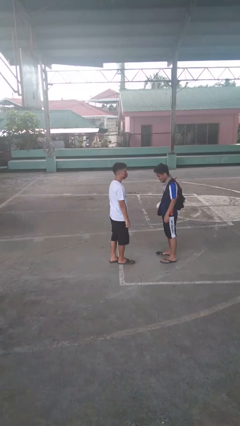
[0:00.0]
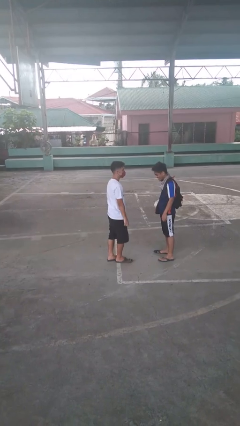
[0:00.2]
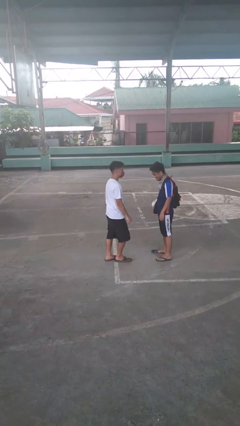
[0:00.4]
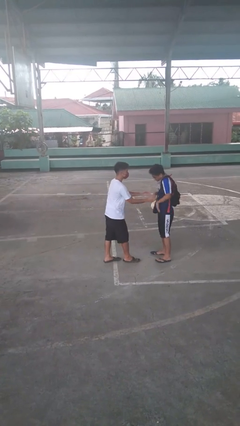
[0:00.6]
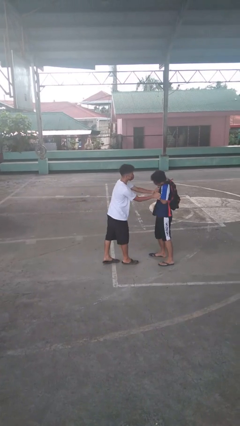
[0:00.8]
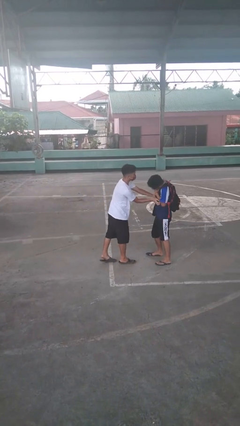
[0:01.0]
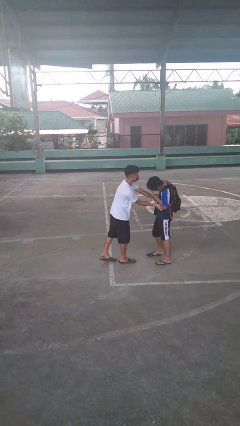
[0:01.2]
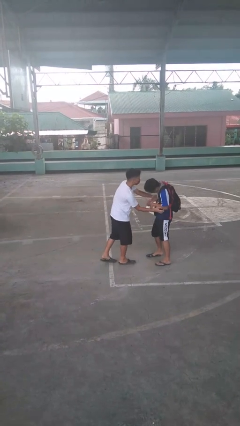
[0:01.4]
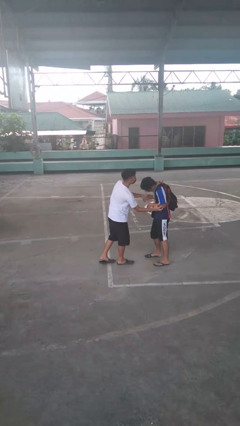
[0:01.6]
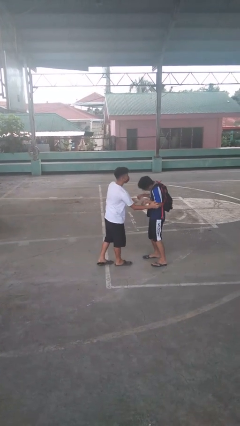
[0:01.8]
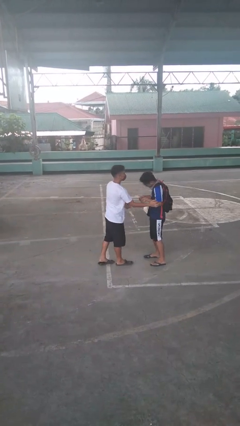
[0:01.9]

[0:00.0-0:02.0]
person tickles person

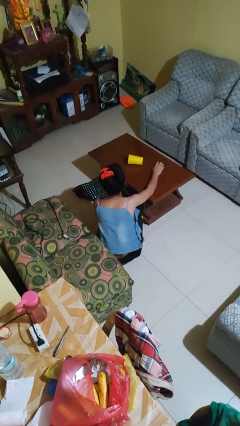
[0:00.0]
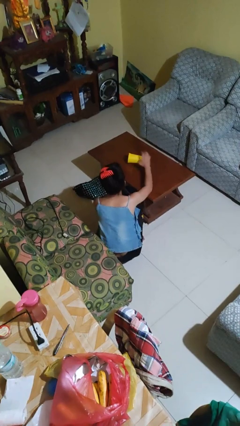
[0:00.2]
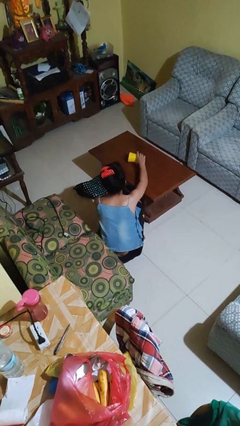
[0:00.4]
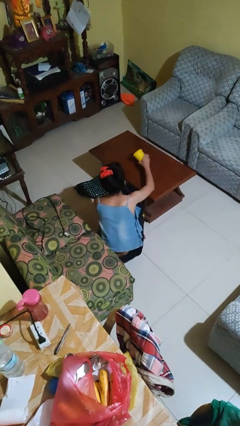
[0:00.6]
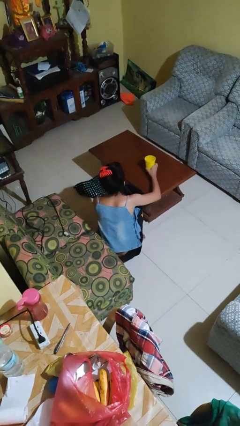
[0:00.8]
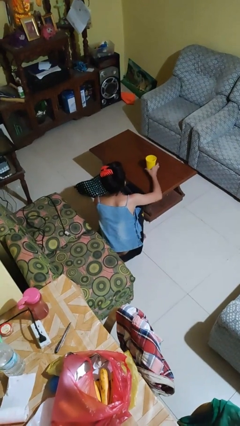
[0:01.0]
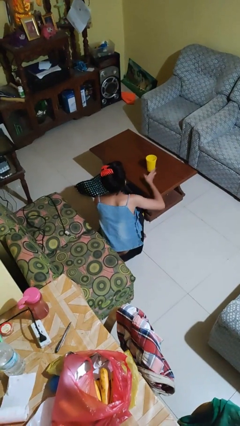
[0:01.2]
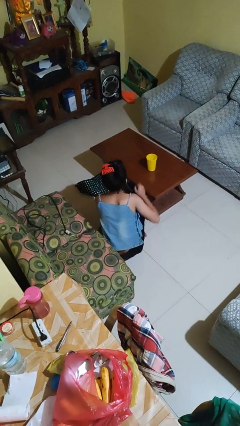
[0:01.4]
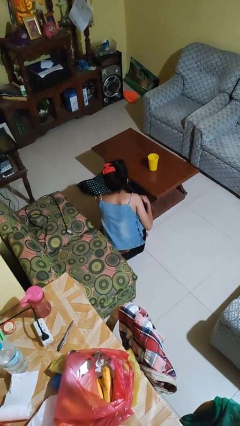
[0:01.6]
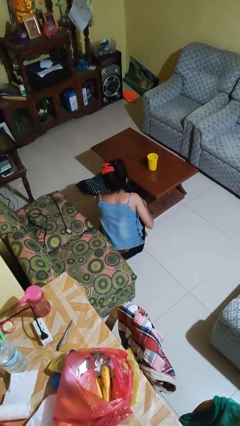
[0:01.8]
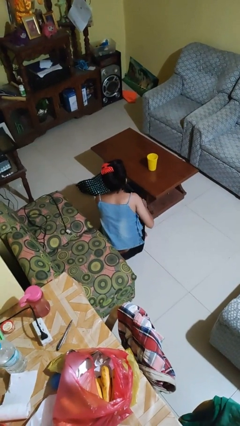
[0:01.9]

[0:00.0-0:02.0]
person sets upright glass

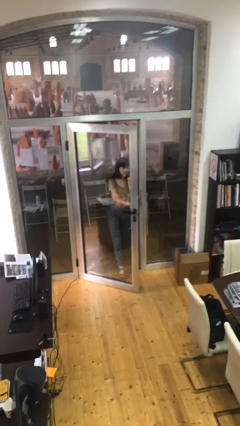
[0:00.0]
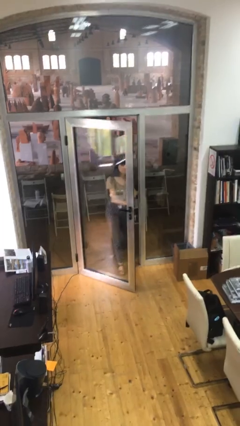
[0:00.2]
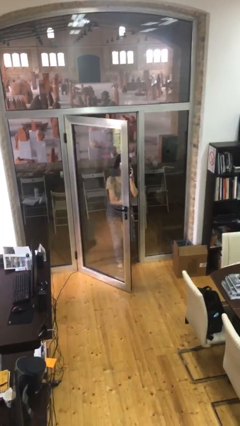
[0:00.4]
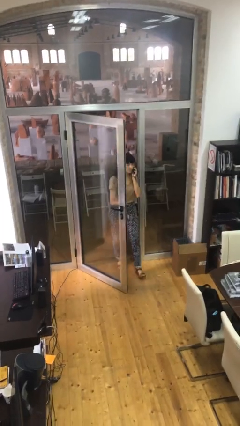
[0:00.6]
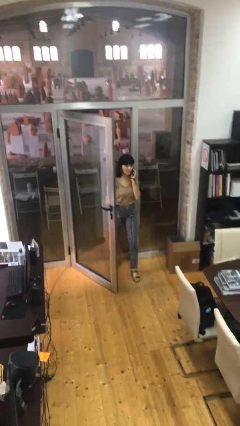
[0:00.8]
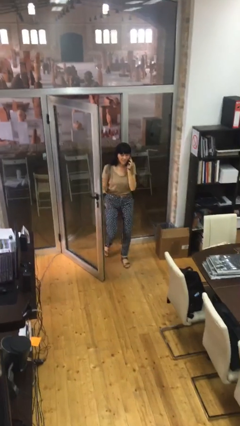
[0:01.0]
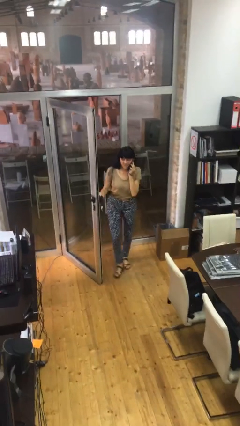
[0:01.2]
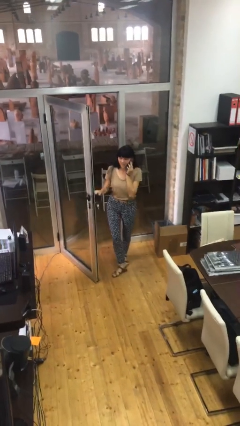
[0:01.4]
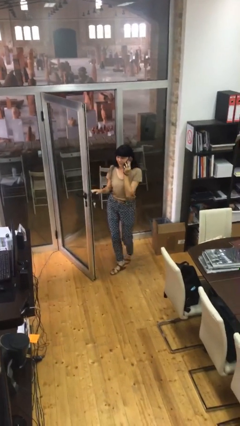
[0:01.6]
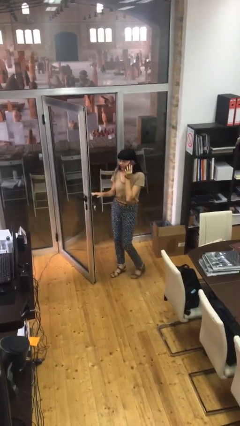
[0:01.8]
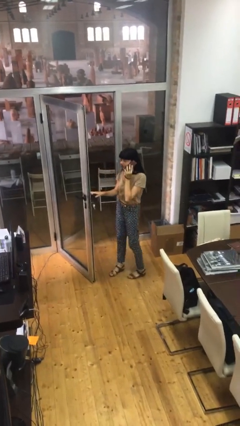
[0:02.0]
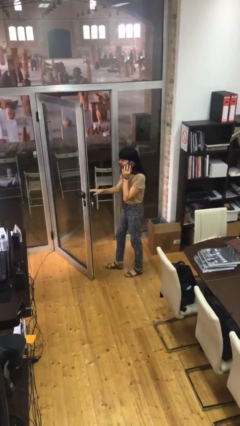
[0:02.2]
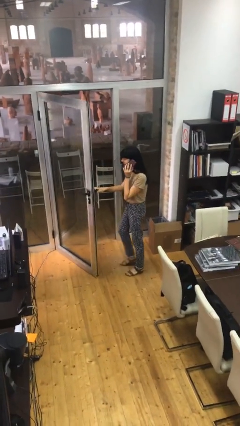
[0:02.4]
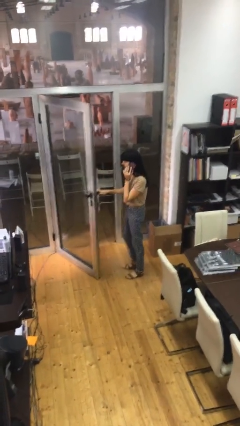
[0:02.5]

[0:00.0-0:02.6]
person enters scene through structure

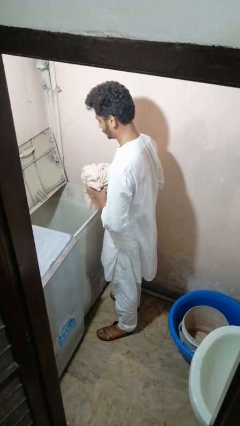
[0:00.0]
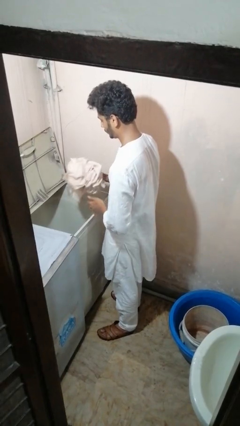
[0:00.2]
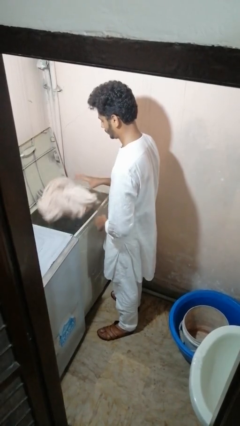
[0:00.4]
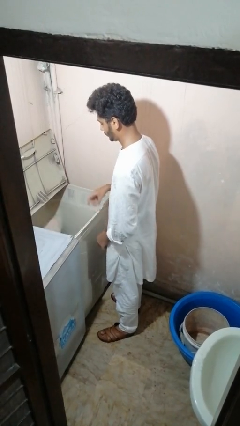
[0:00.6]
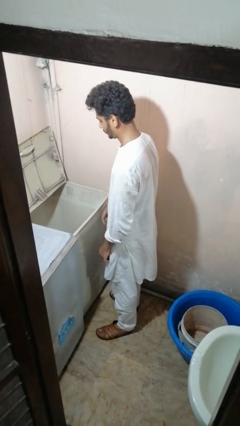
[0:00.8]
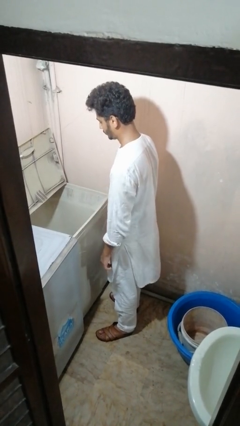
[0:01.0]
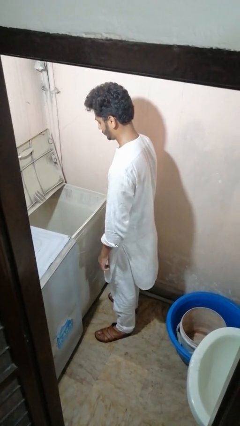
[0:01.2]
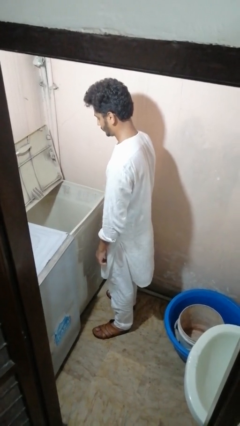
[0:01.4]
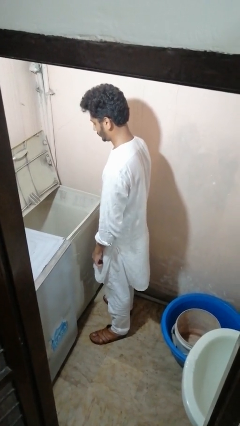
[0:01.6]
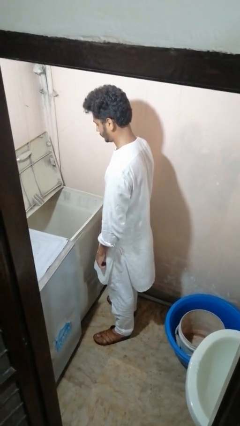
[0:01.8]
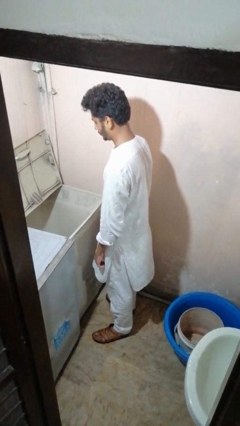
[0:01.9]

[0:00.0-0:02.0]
person loads clotheswasher

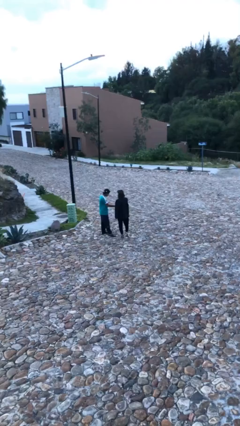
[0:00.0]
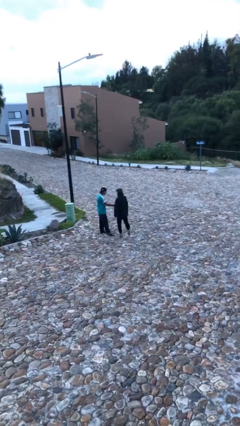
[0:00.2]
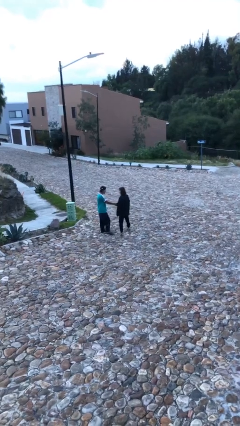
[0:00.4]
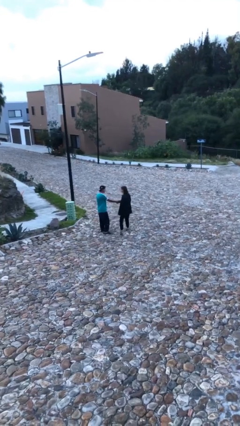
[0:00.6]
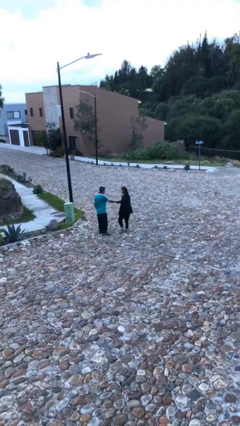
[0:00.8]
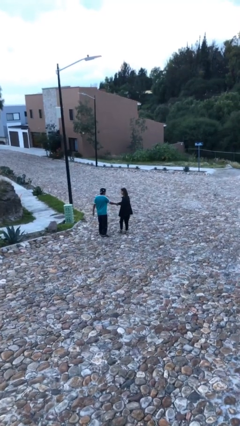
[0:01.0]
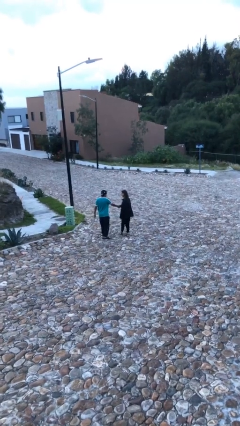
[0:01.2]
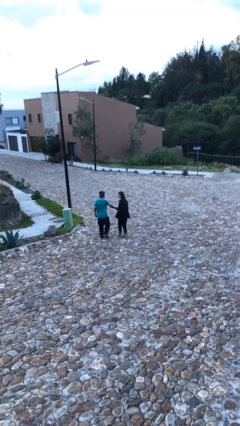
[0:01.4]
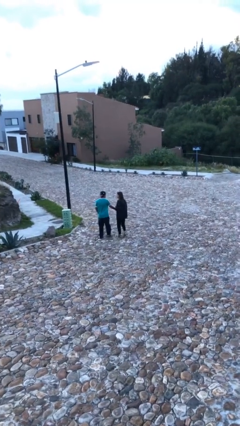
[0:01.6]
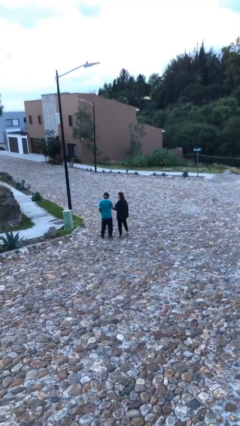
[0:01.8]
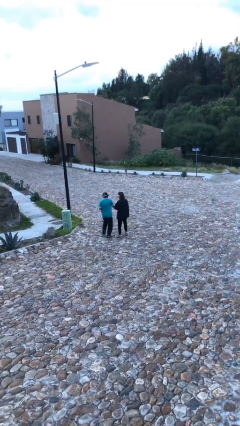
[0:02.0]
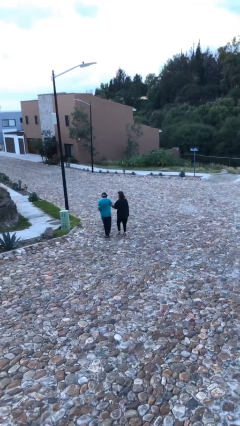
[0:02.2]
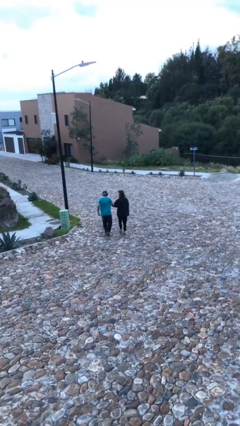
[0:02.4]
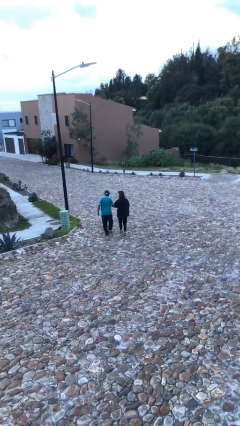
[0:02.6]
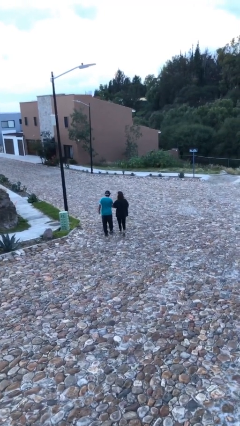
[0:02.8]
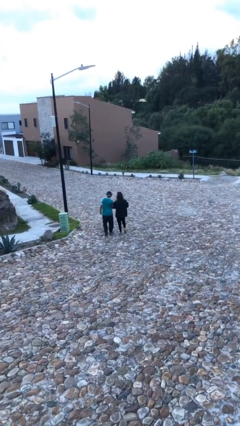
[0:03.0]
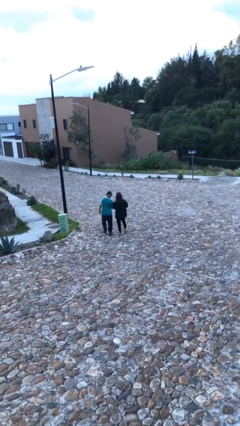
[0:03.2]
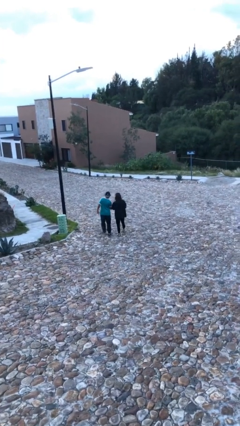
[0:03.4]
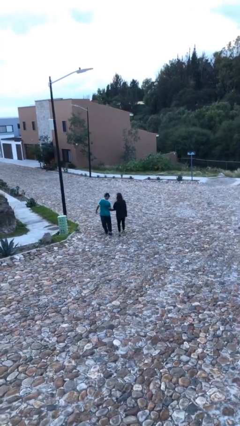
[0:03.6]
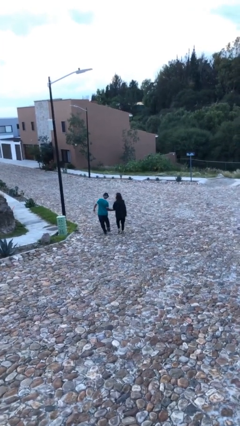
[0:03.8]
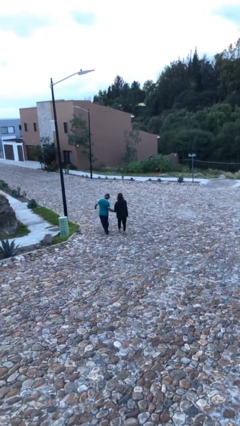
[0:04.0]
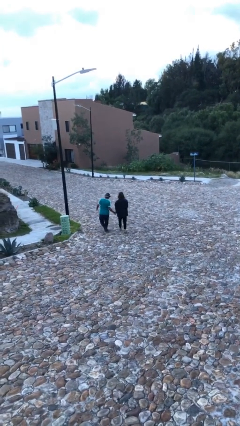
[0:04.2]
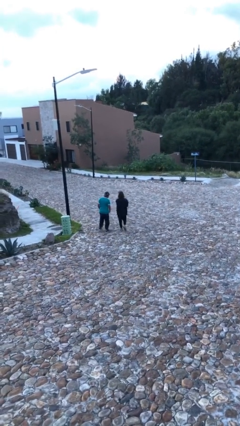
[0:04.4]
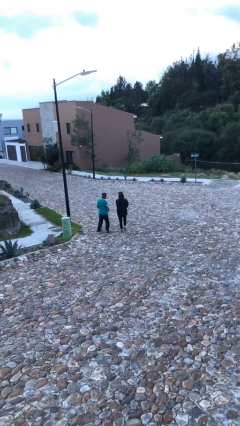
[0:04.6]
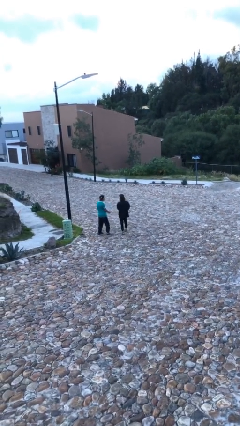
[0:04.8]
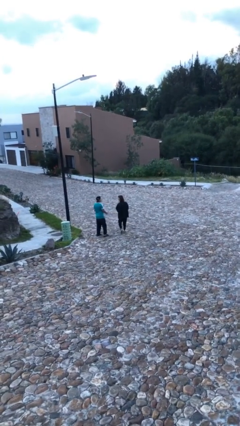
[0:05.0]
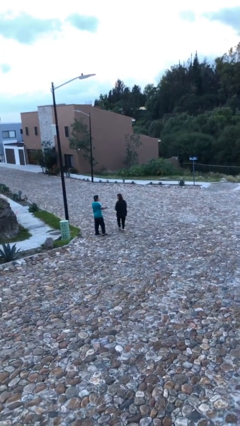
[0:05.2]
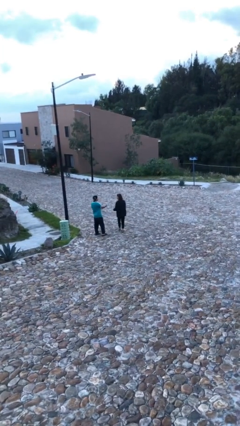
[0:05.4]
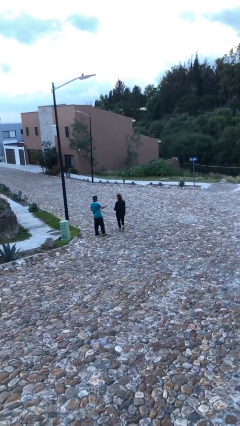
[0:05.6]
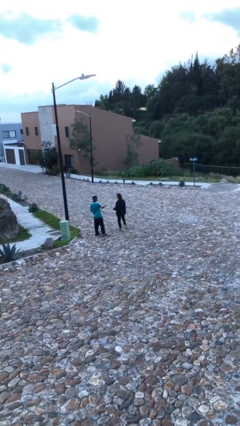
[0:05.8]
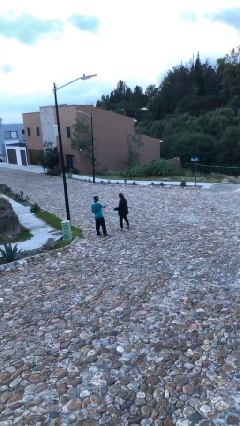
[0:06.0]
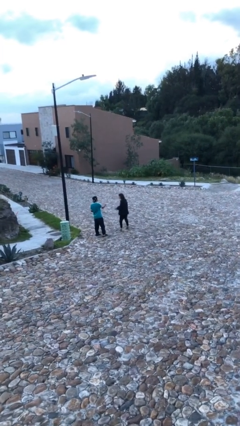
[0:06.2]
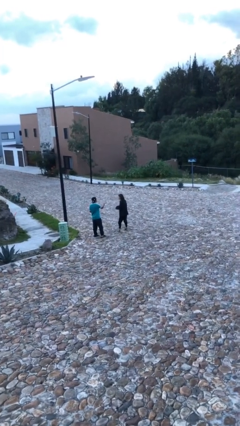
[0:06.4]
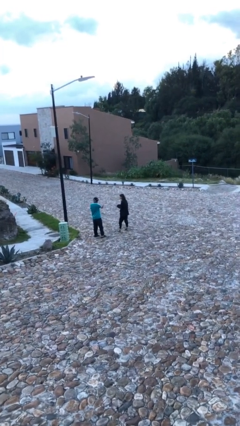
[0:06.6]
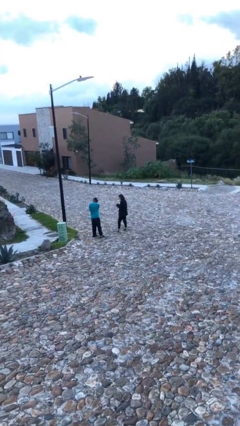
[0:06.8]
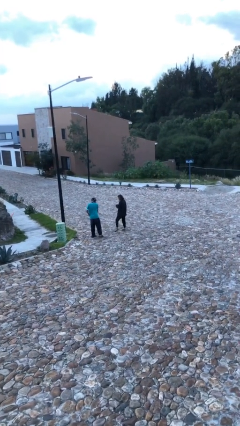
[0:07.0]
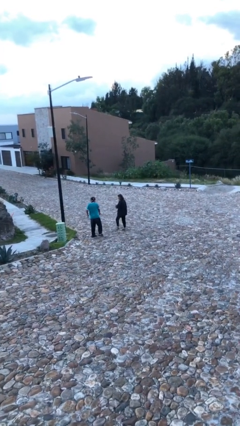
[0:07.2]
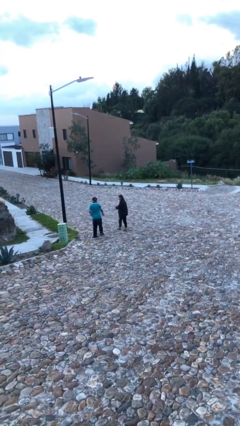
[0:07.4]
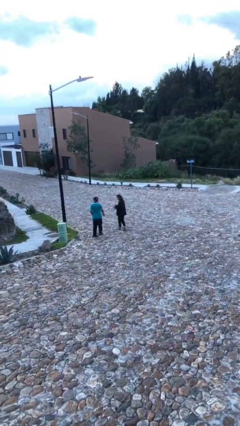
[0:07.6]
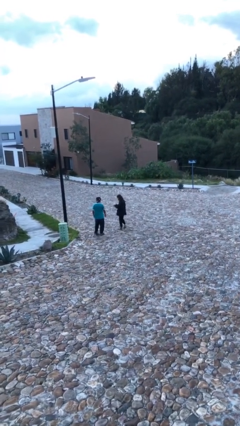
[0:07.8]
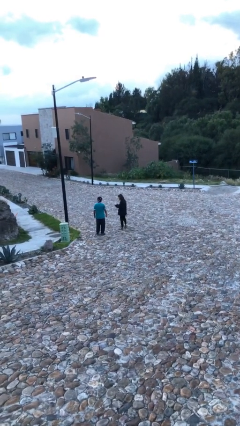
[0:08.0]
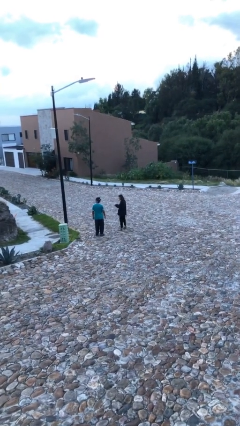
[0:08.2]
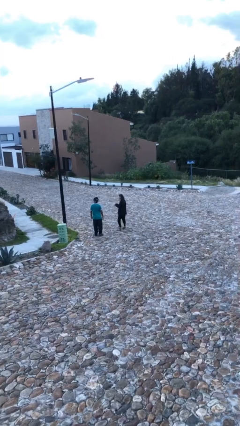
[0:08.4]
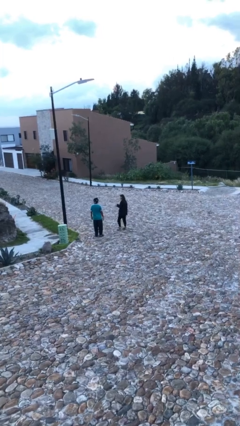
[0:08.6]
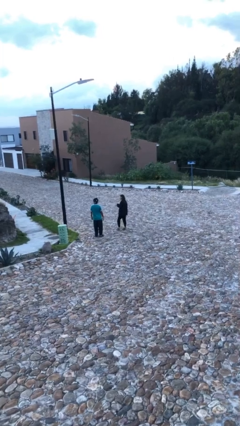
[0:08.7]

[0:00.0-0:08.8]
person talks to person

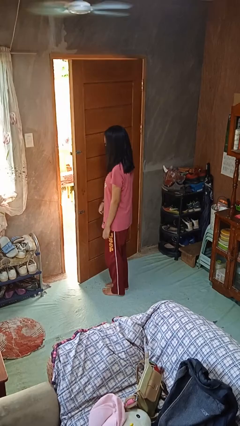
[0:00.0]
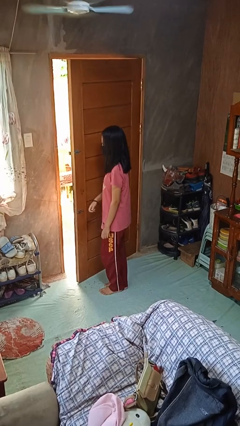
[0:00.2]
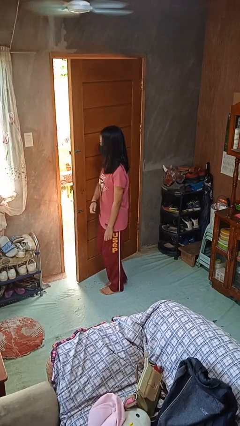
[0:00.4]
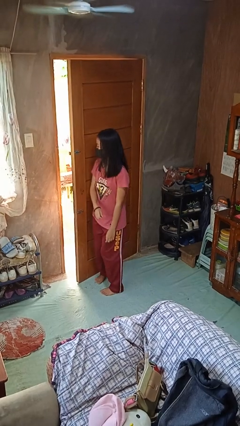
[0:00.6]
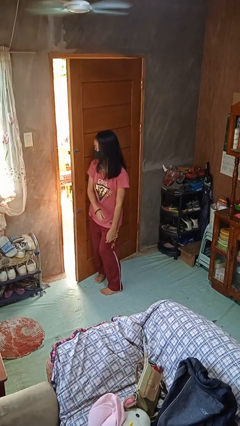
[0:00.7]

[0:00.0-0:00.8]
person closes door with hip
